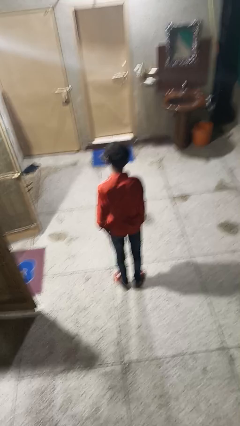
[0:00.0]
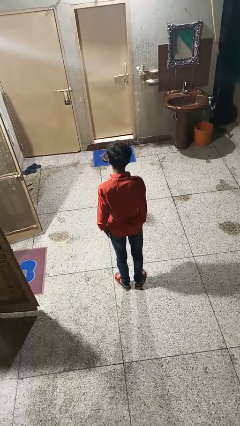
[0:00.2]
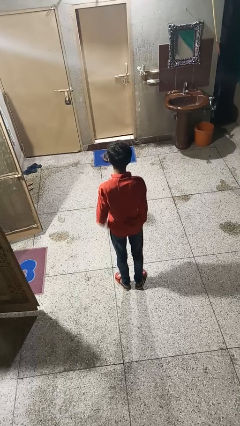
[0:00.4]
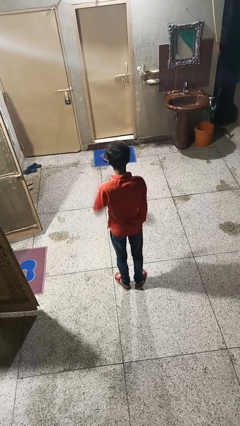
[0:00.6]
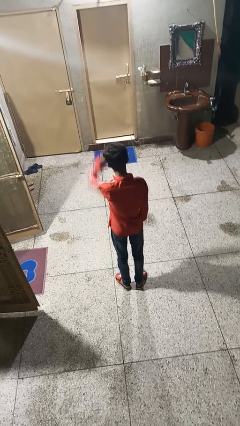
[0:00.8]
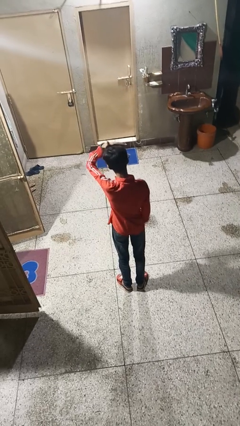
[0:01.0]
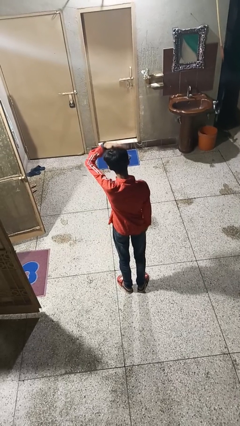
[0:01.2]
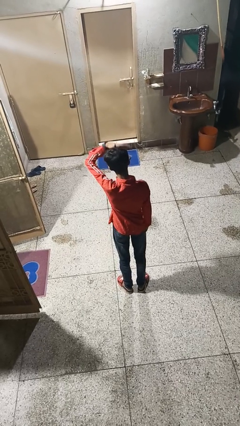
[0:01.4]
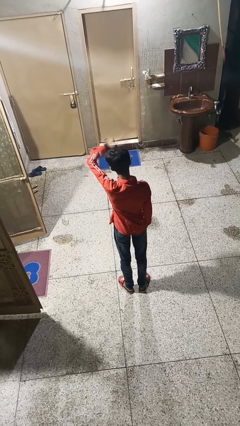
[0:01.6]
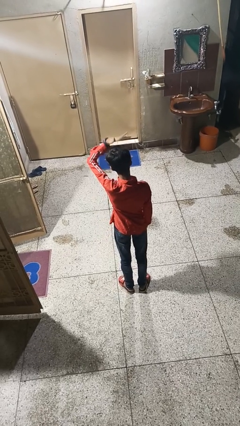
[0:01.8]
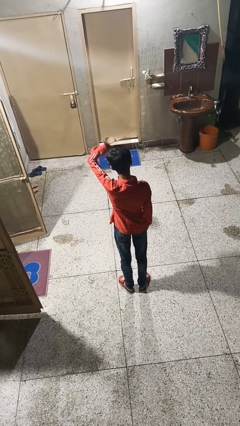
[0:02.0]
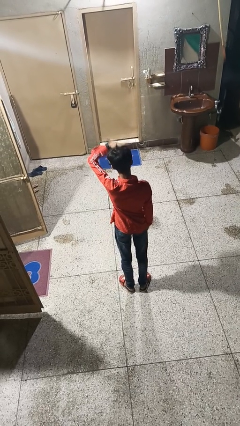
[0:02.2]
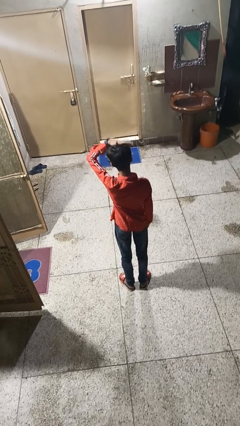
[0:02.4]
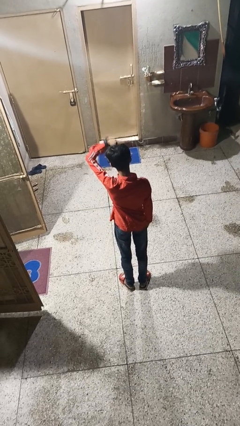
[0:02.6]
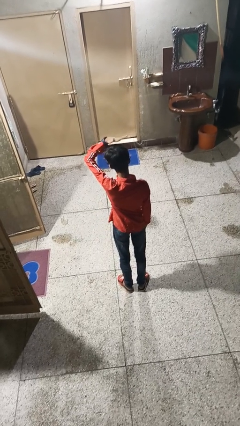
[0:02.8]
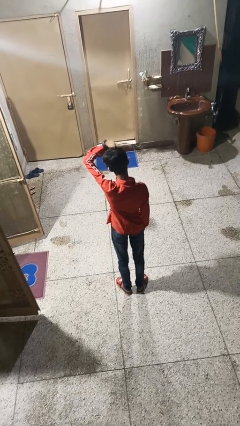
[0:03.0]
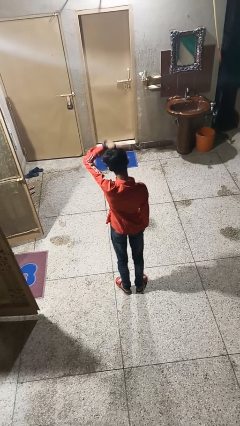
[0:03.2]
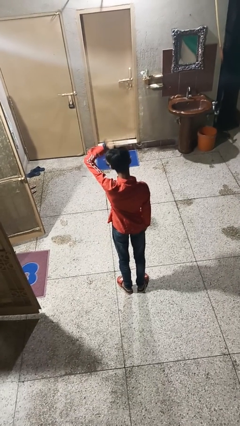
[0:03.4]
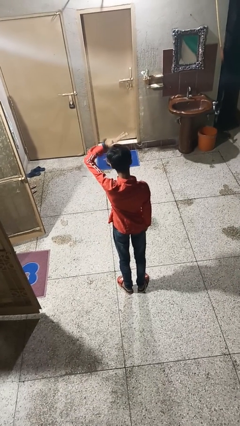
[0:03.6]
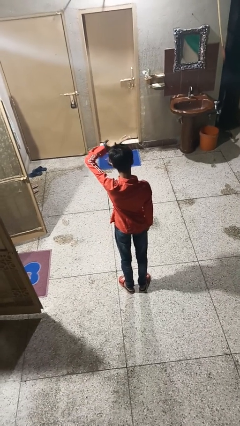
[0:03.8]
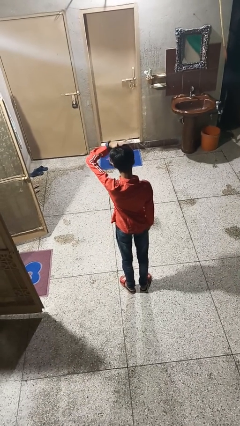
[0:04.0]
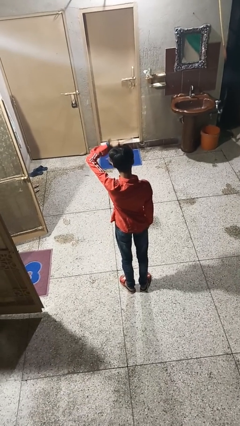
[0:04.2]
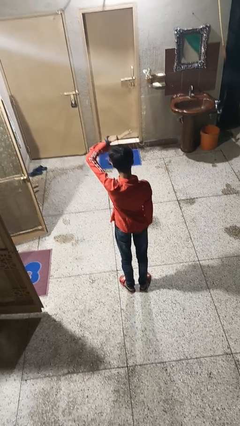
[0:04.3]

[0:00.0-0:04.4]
person pats head

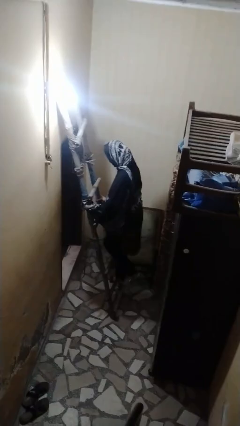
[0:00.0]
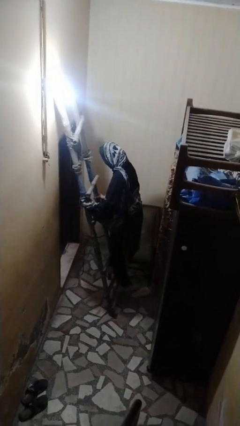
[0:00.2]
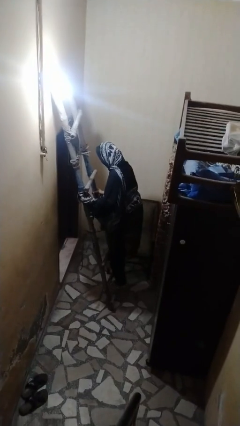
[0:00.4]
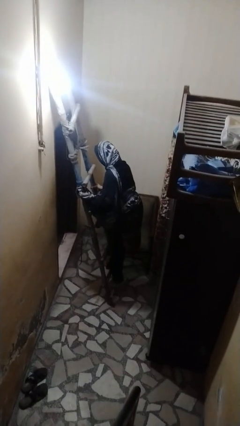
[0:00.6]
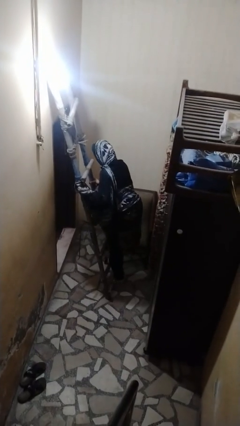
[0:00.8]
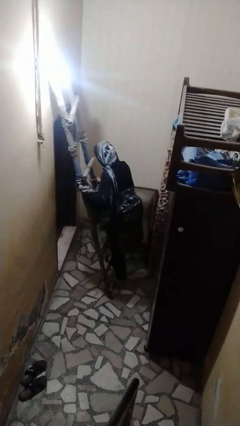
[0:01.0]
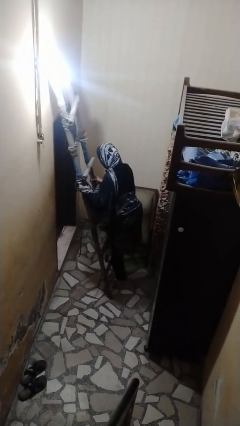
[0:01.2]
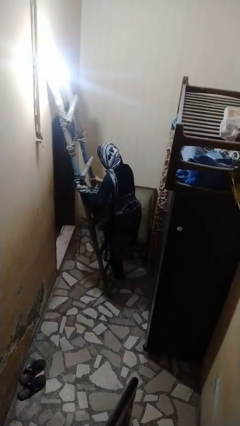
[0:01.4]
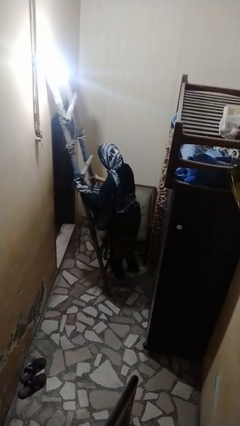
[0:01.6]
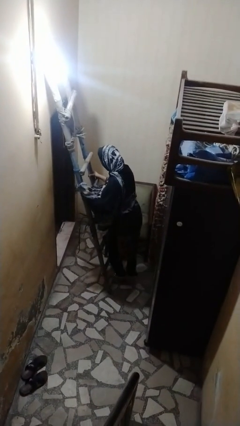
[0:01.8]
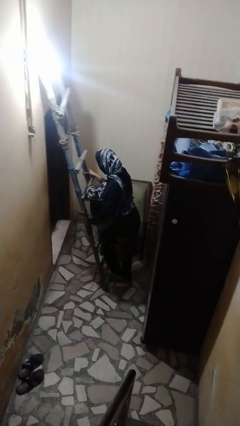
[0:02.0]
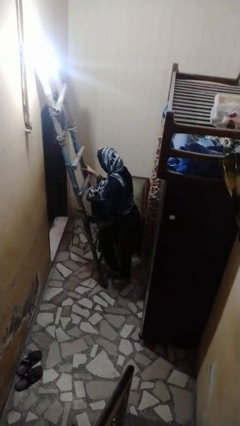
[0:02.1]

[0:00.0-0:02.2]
person climbs down ladder

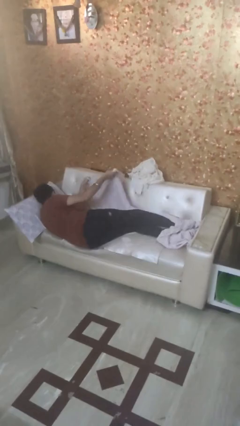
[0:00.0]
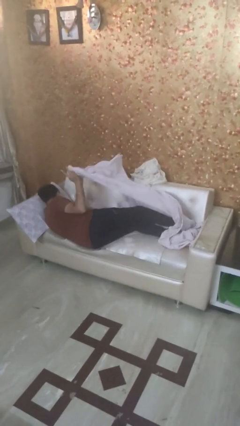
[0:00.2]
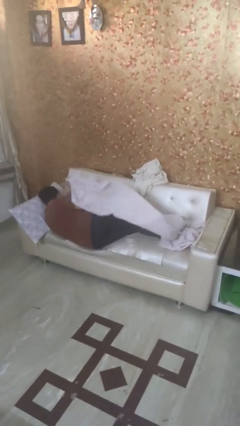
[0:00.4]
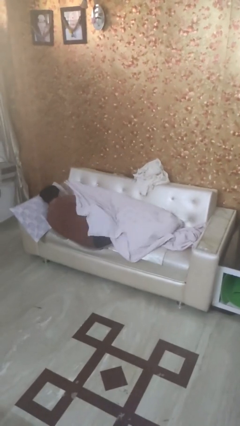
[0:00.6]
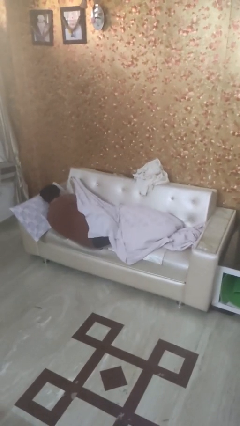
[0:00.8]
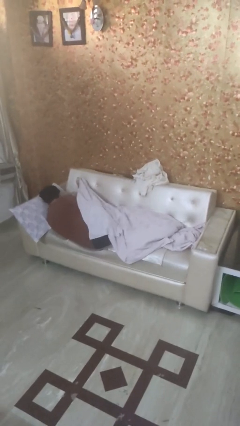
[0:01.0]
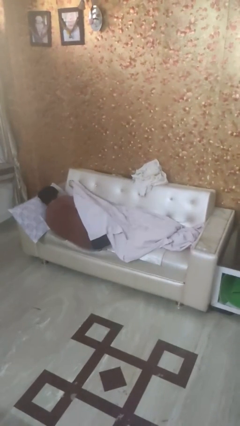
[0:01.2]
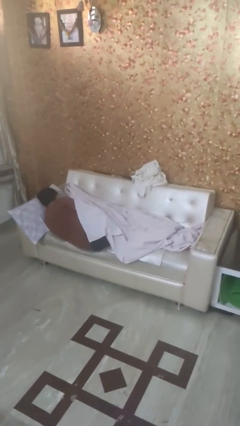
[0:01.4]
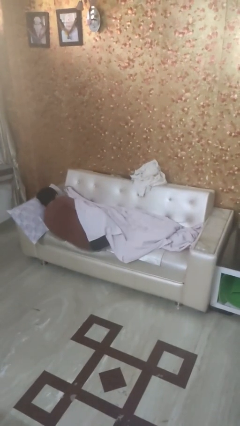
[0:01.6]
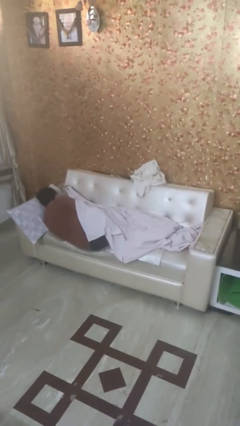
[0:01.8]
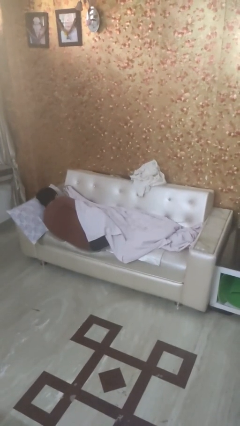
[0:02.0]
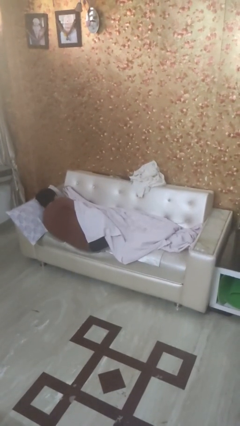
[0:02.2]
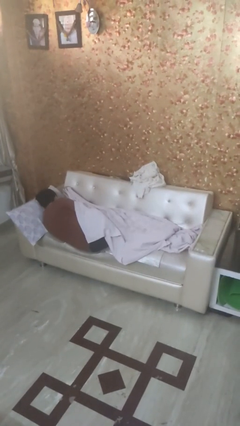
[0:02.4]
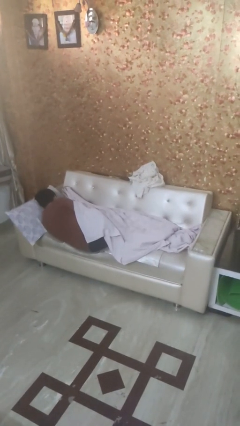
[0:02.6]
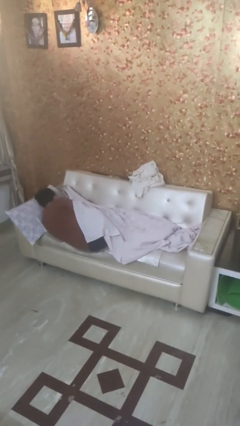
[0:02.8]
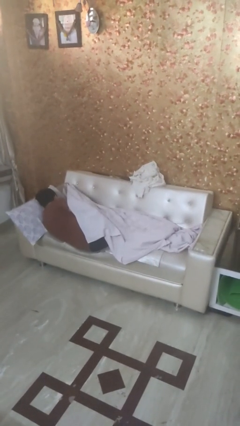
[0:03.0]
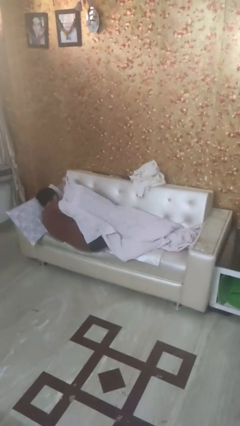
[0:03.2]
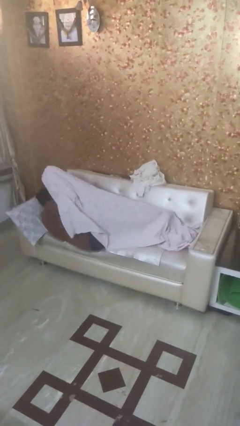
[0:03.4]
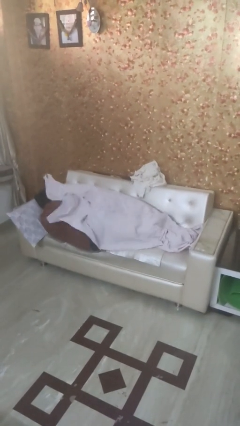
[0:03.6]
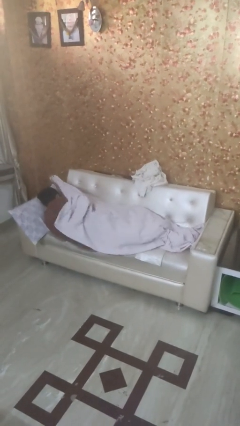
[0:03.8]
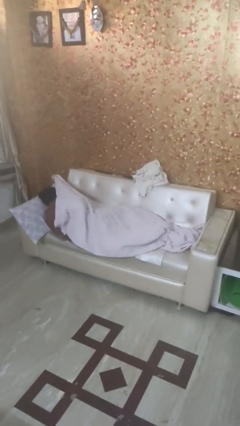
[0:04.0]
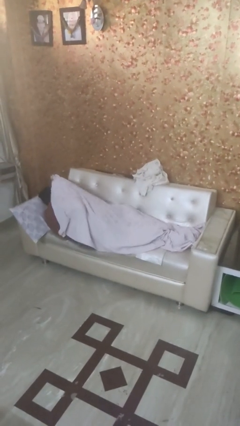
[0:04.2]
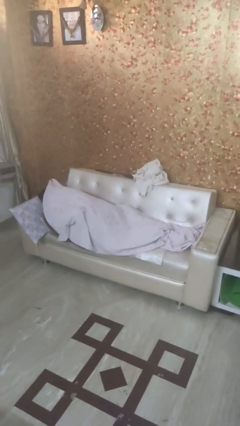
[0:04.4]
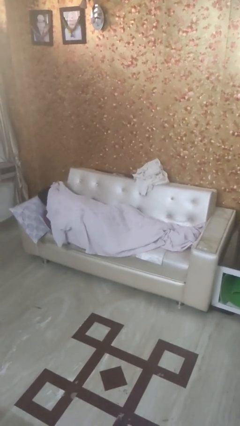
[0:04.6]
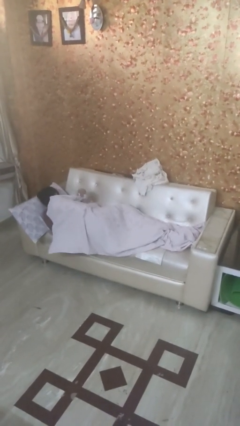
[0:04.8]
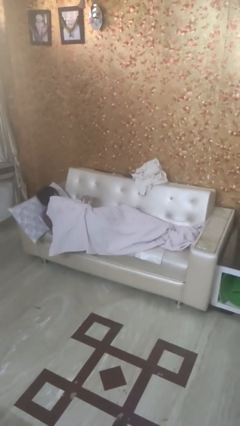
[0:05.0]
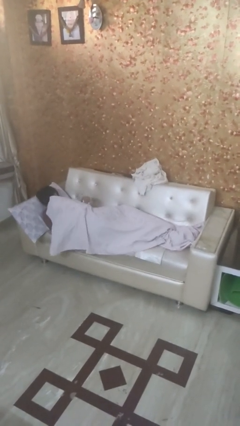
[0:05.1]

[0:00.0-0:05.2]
person covers with bedsheets

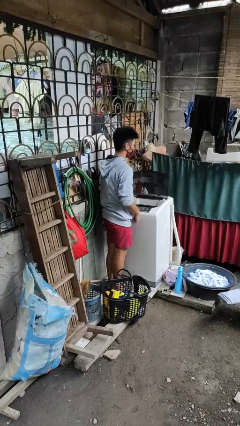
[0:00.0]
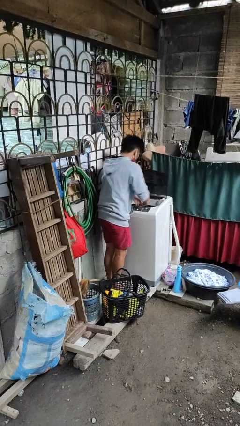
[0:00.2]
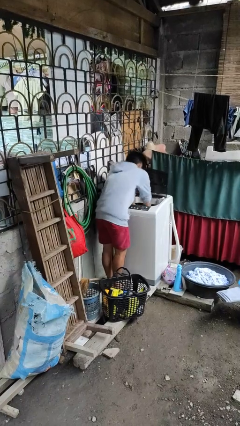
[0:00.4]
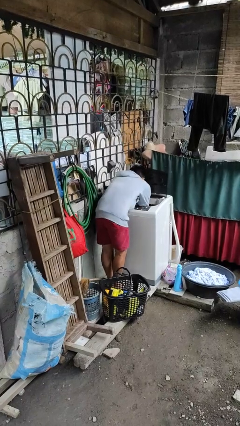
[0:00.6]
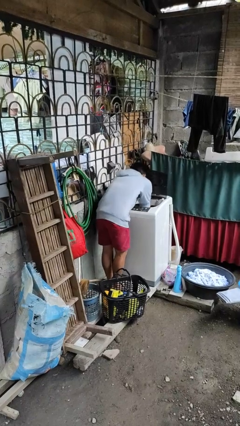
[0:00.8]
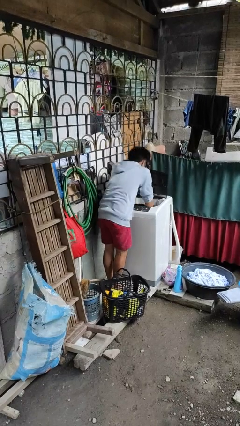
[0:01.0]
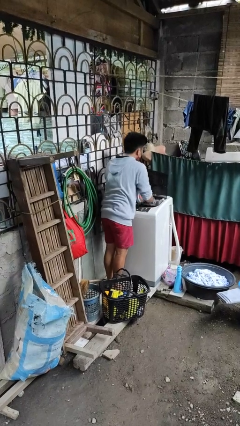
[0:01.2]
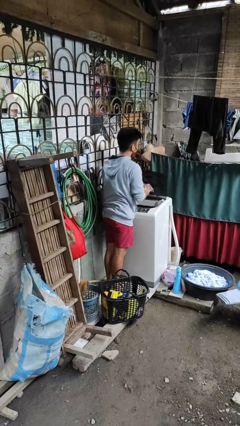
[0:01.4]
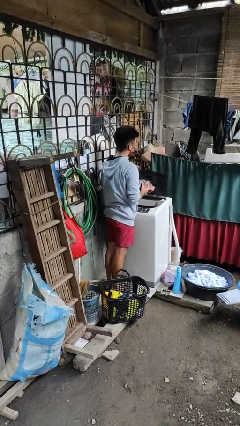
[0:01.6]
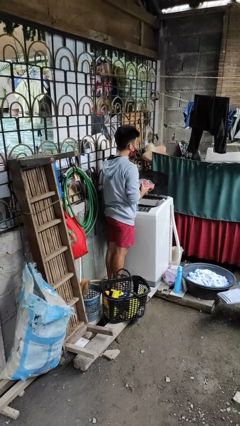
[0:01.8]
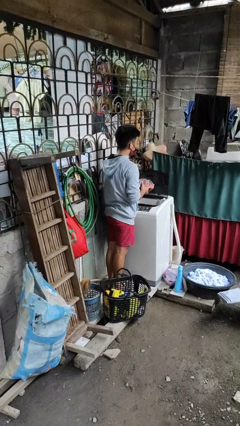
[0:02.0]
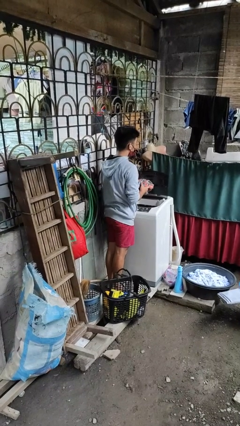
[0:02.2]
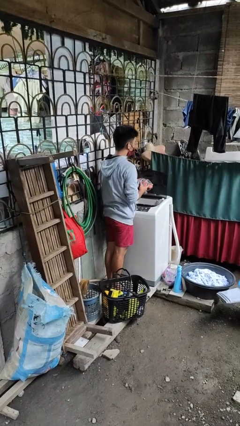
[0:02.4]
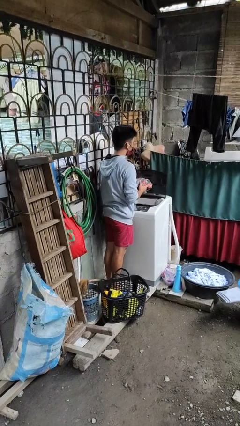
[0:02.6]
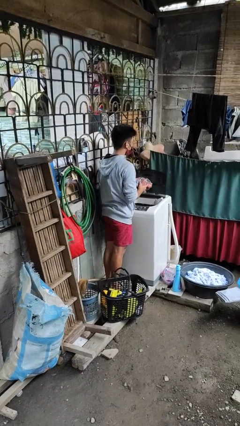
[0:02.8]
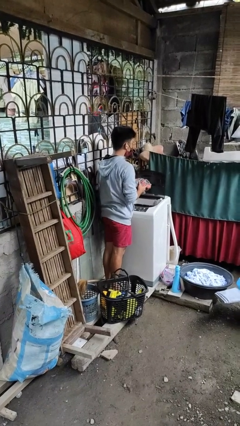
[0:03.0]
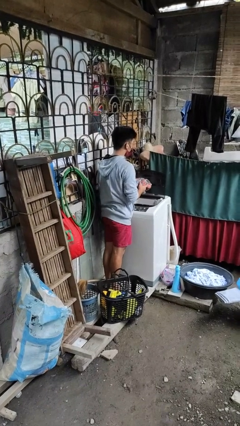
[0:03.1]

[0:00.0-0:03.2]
person unloads clotheswasher

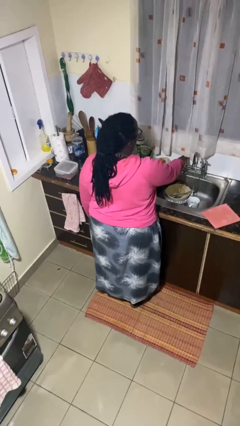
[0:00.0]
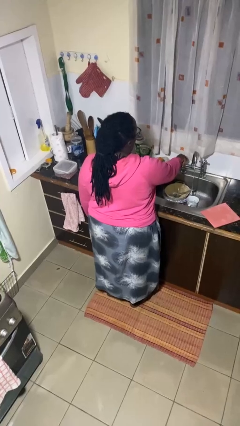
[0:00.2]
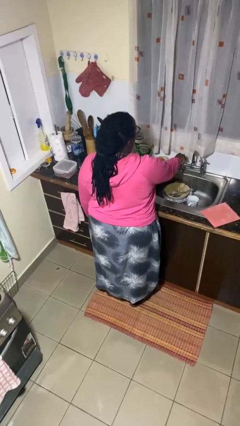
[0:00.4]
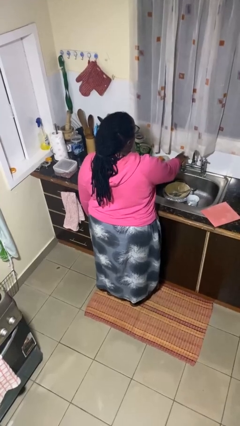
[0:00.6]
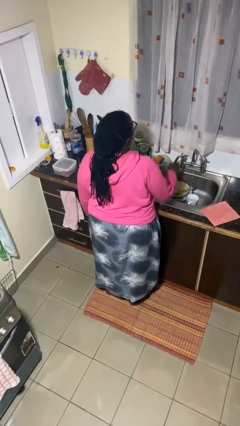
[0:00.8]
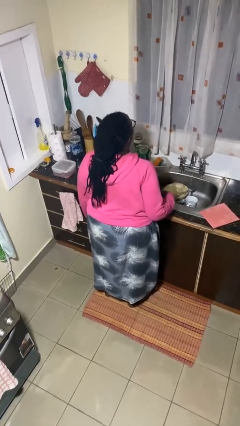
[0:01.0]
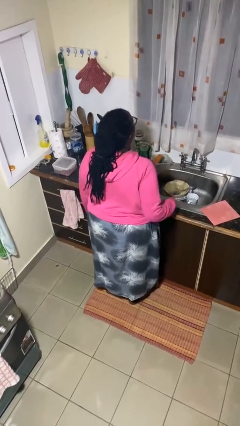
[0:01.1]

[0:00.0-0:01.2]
person turns off faucet

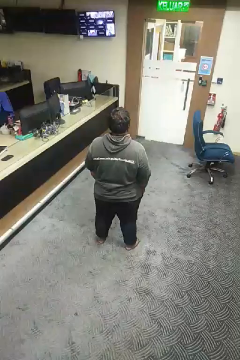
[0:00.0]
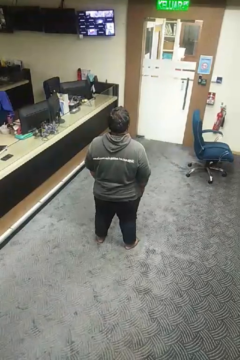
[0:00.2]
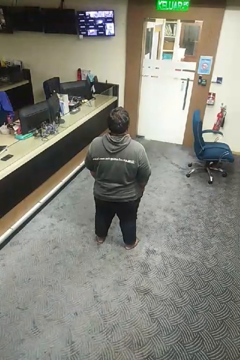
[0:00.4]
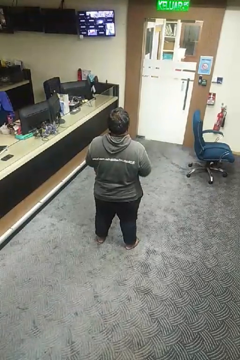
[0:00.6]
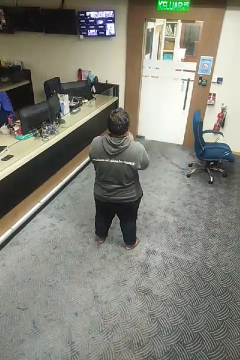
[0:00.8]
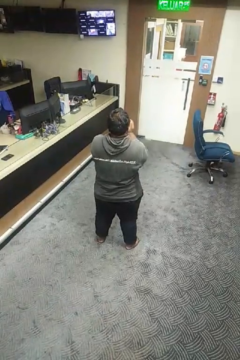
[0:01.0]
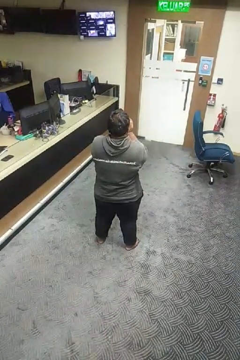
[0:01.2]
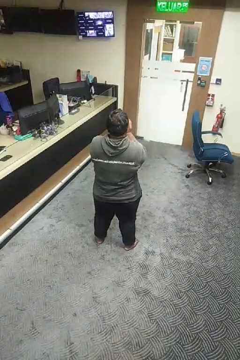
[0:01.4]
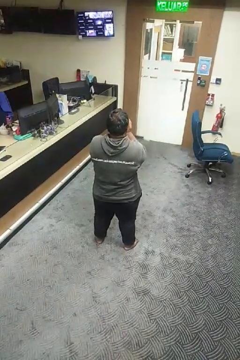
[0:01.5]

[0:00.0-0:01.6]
person prays
